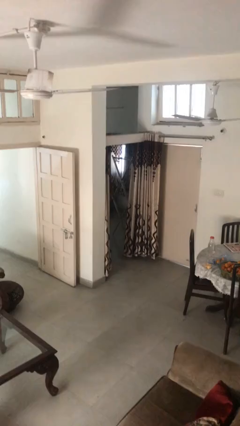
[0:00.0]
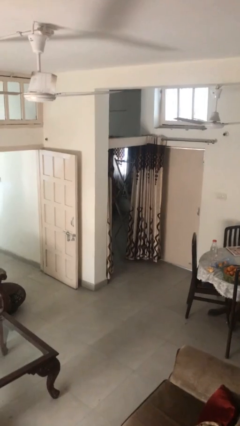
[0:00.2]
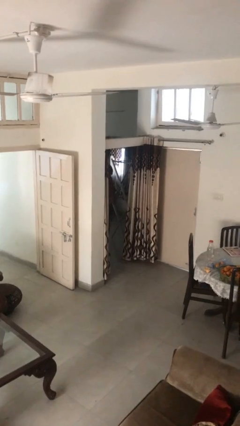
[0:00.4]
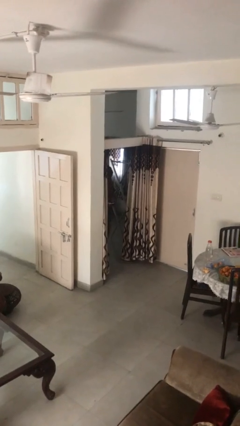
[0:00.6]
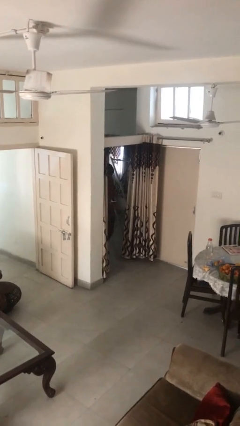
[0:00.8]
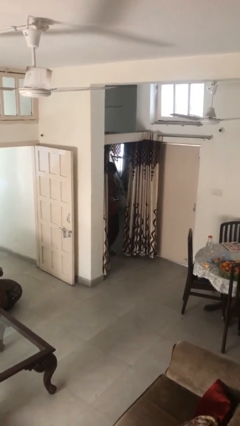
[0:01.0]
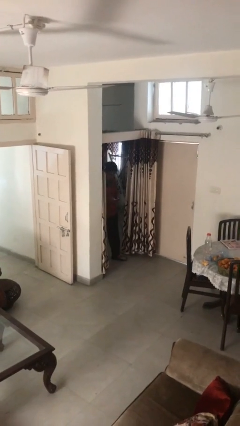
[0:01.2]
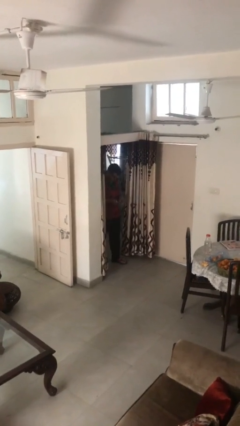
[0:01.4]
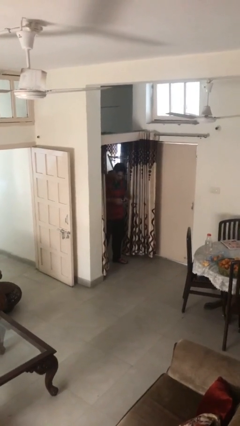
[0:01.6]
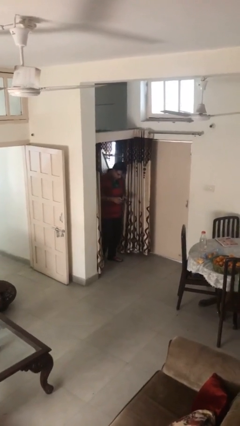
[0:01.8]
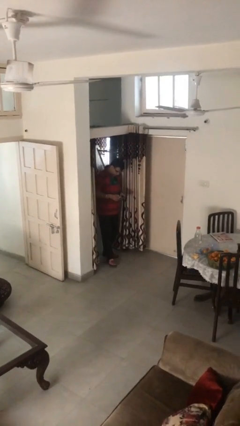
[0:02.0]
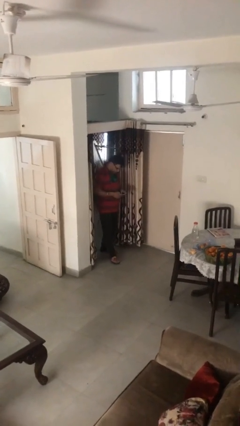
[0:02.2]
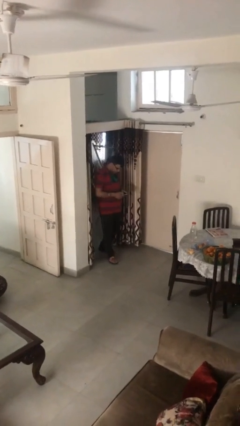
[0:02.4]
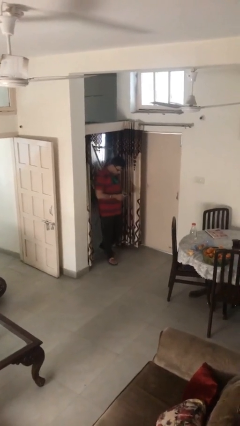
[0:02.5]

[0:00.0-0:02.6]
person enters scene through structure

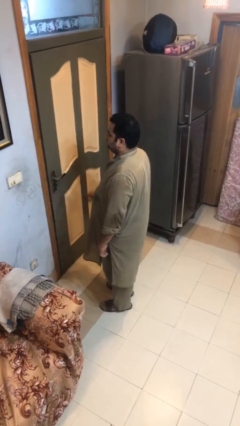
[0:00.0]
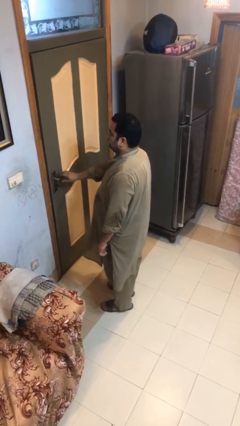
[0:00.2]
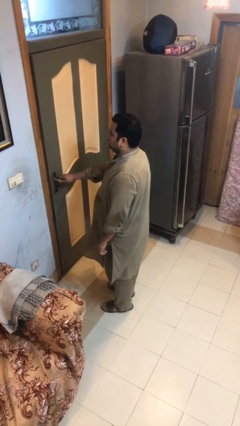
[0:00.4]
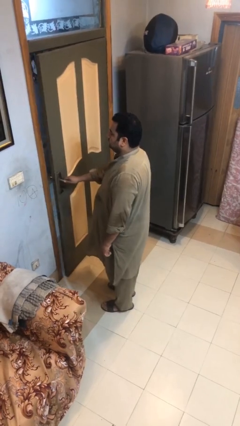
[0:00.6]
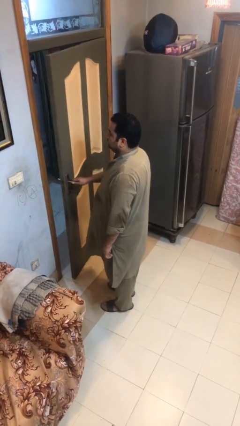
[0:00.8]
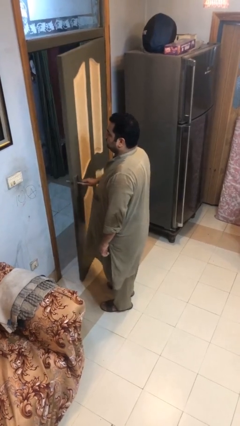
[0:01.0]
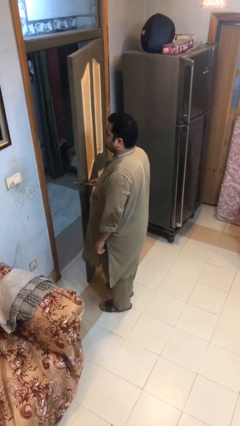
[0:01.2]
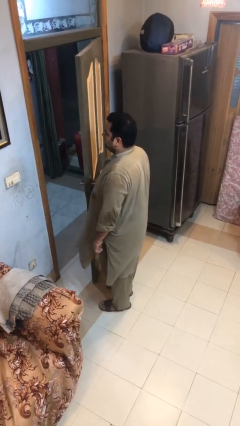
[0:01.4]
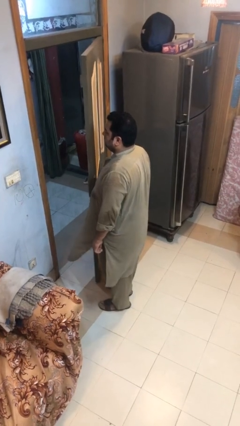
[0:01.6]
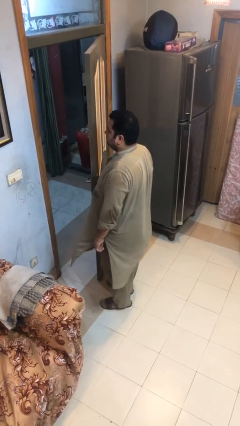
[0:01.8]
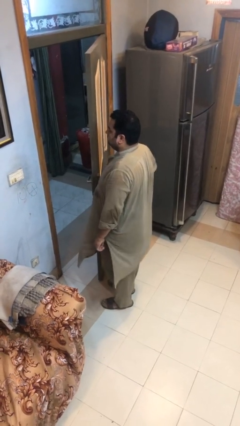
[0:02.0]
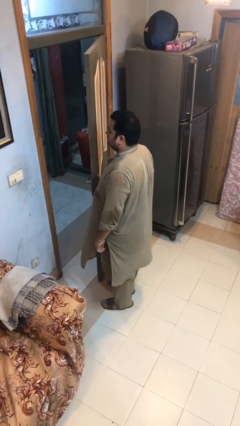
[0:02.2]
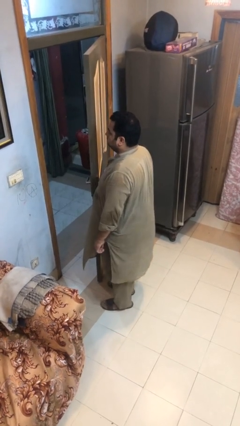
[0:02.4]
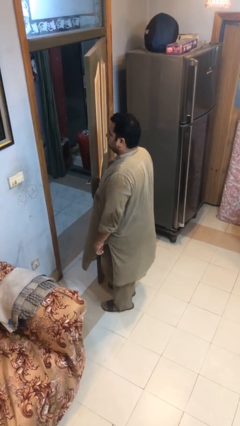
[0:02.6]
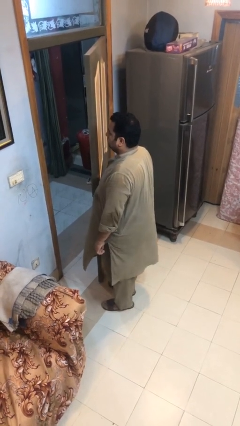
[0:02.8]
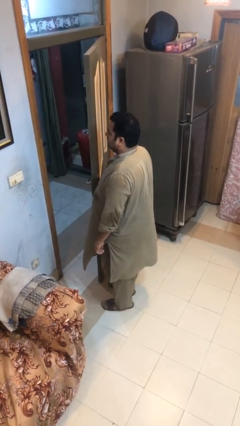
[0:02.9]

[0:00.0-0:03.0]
person opens facility door

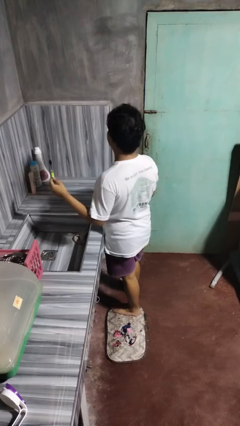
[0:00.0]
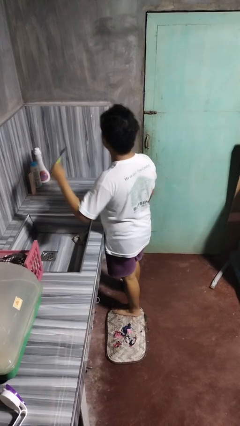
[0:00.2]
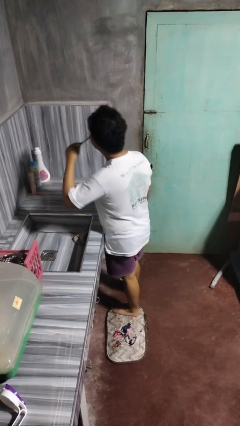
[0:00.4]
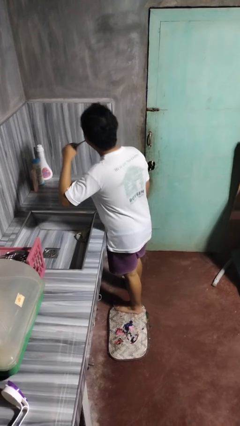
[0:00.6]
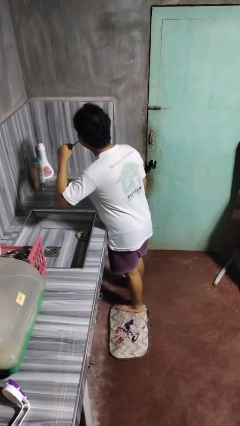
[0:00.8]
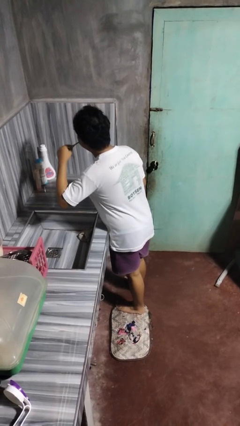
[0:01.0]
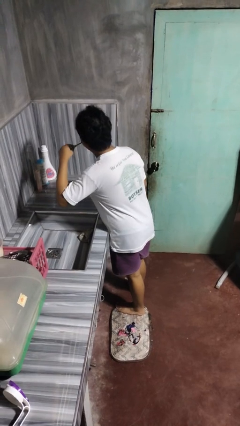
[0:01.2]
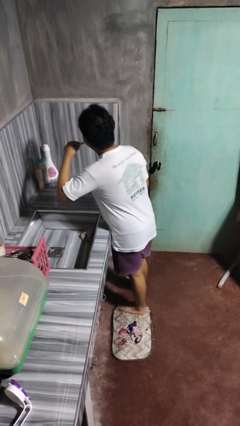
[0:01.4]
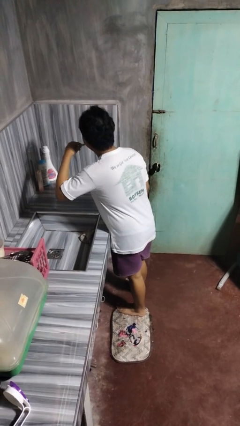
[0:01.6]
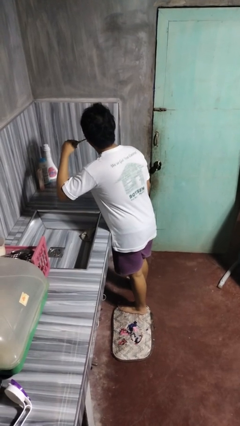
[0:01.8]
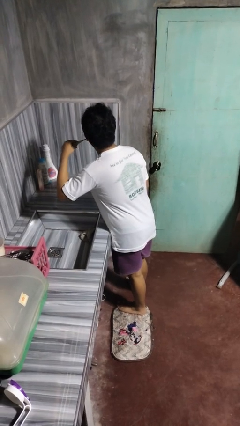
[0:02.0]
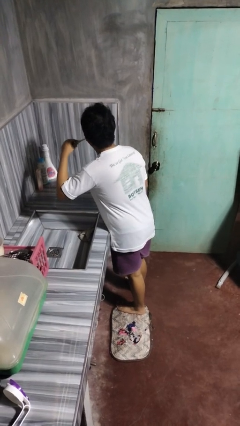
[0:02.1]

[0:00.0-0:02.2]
person brushes teeth

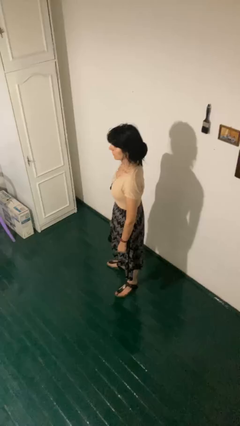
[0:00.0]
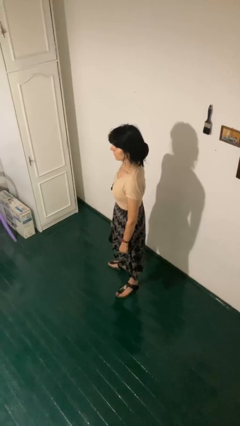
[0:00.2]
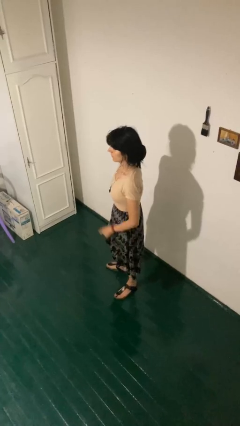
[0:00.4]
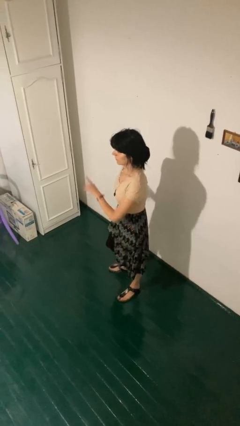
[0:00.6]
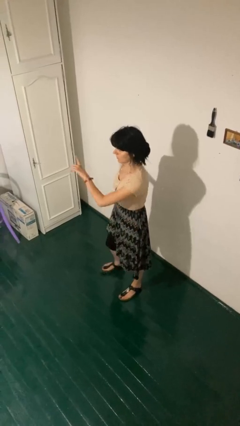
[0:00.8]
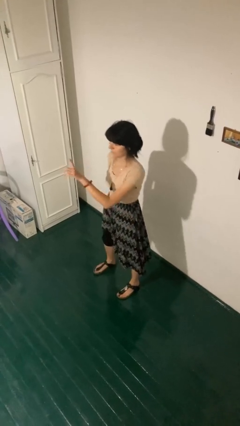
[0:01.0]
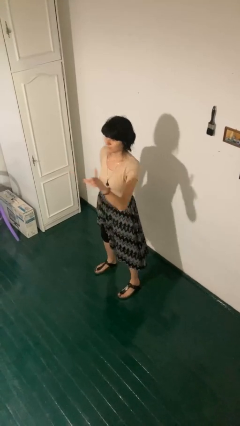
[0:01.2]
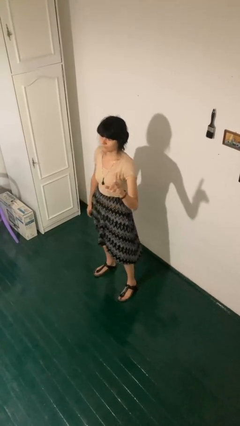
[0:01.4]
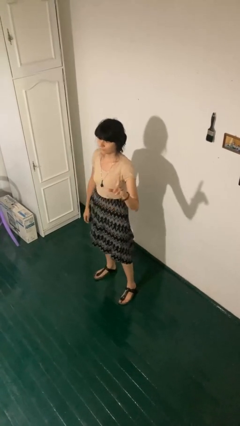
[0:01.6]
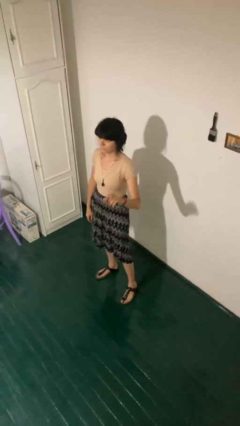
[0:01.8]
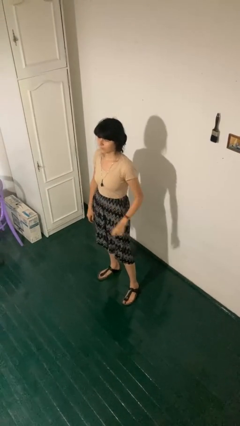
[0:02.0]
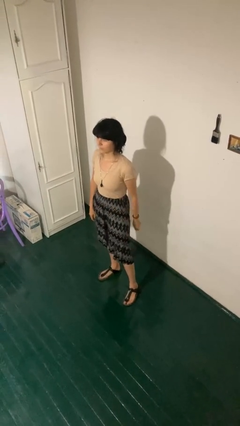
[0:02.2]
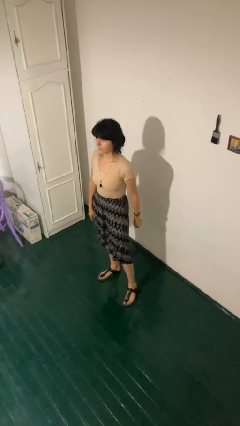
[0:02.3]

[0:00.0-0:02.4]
person gestures swipe left

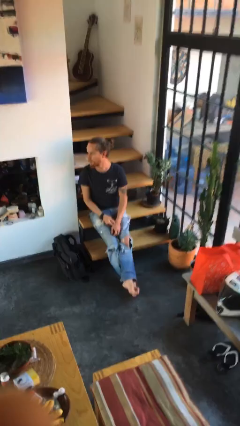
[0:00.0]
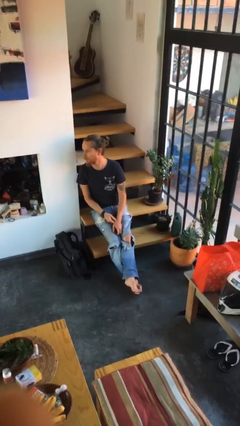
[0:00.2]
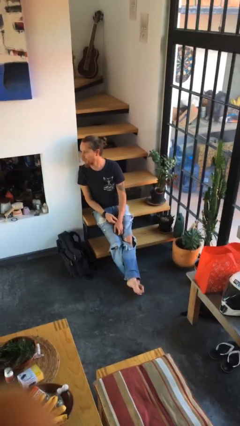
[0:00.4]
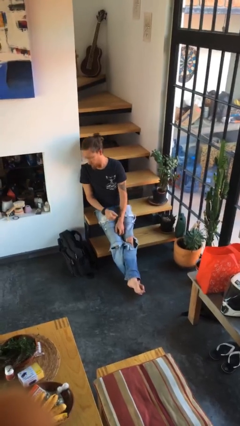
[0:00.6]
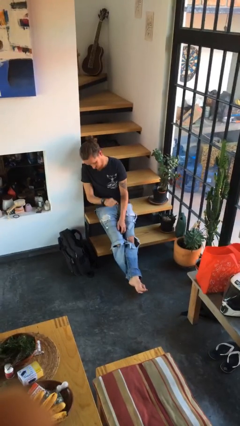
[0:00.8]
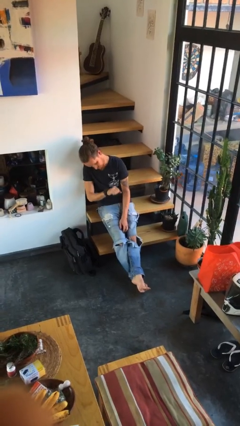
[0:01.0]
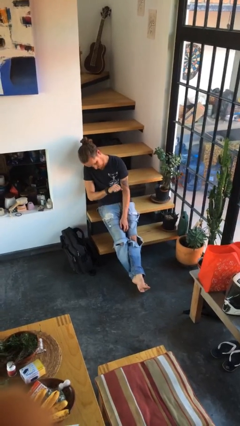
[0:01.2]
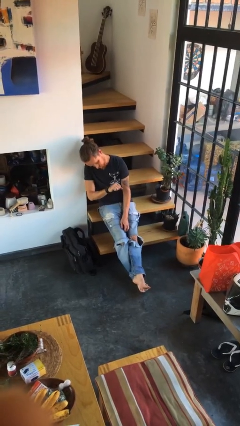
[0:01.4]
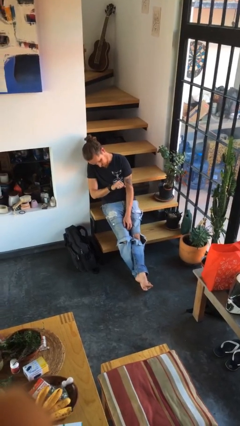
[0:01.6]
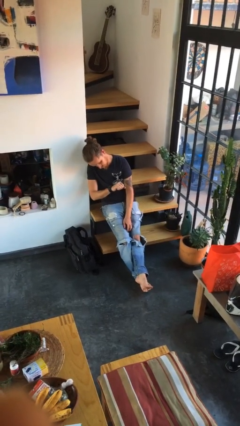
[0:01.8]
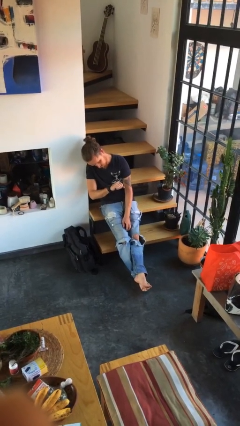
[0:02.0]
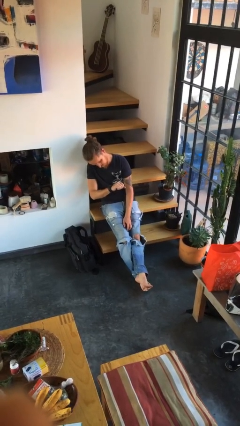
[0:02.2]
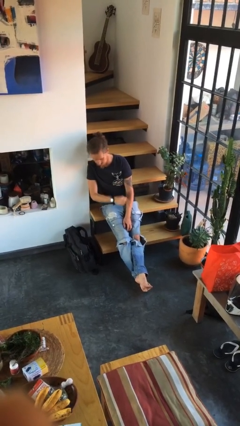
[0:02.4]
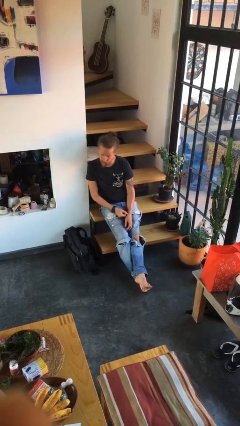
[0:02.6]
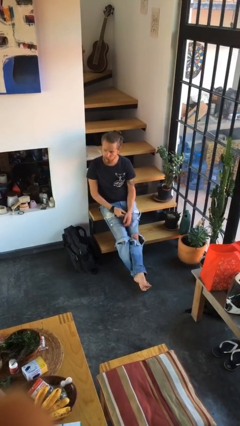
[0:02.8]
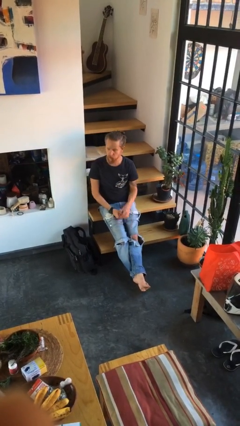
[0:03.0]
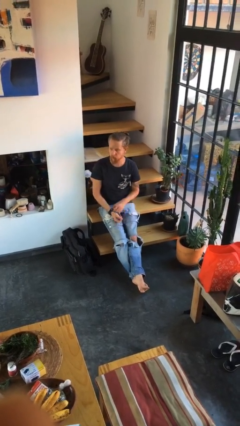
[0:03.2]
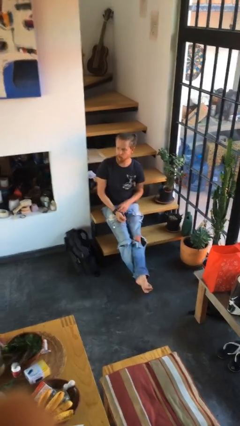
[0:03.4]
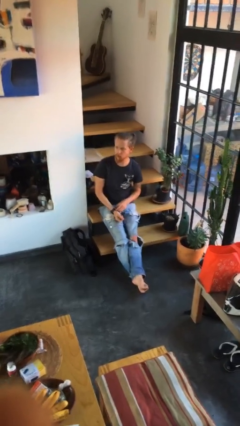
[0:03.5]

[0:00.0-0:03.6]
person looks at wristwatch

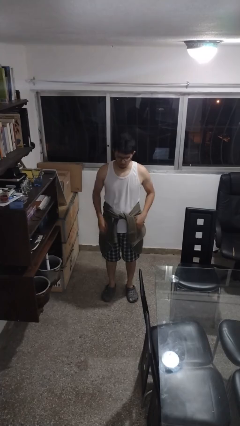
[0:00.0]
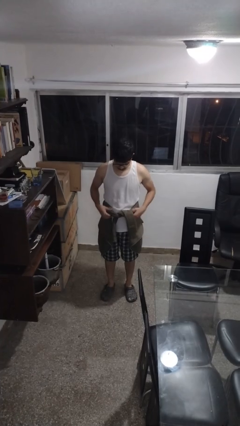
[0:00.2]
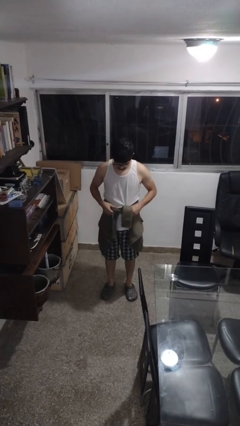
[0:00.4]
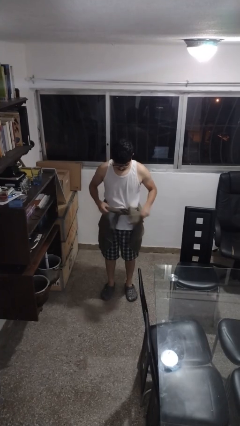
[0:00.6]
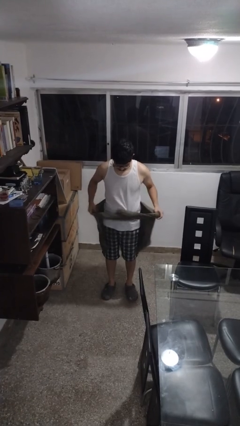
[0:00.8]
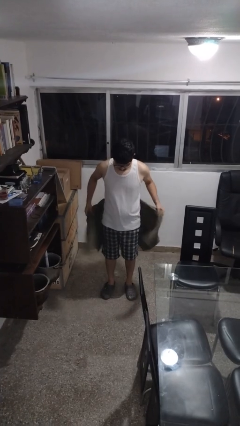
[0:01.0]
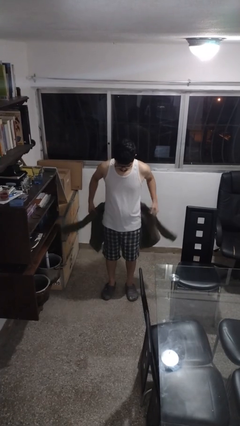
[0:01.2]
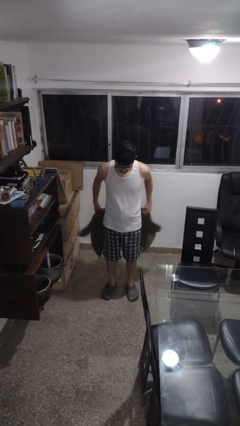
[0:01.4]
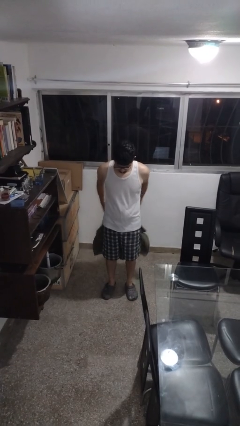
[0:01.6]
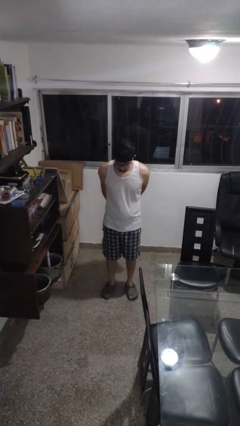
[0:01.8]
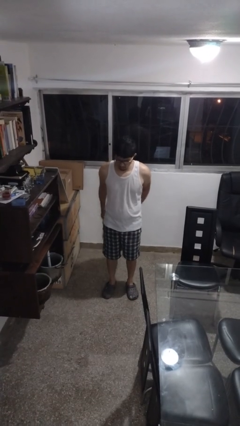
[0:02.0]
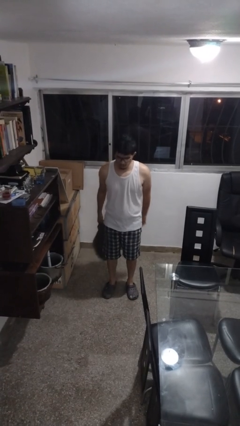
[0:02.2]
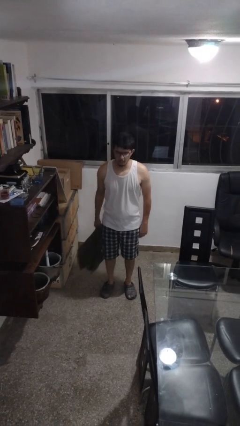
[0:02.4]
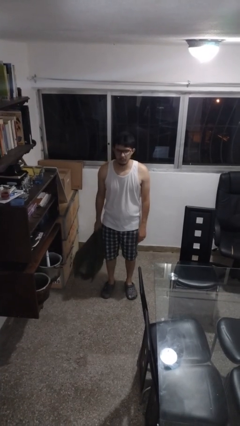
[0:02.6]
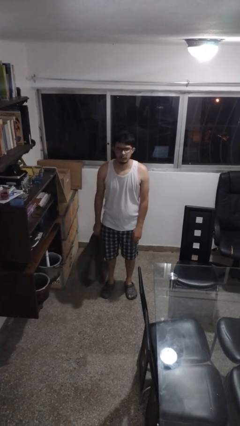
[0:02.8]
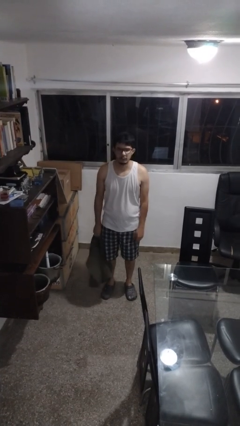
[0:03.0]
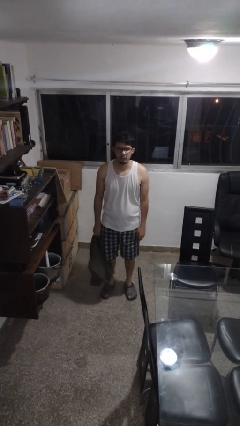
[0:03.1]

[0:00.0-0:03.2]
person unties jacket around waist
